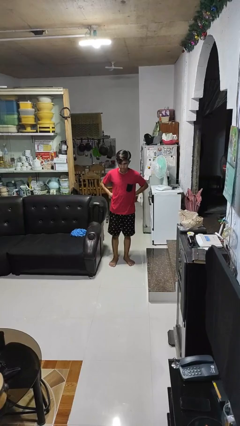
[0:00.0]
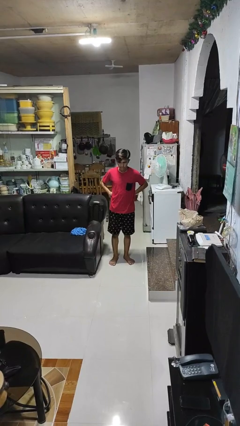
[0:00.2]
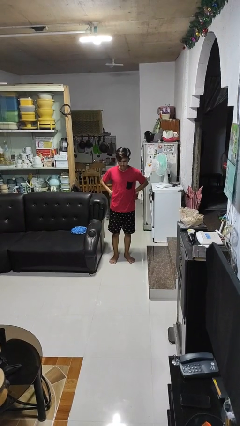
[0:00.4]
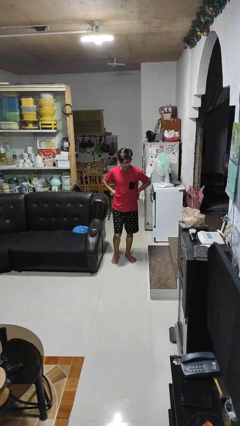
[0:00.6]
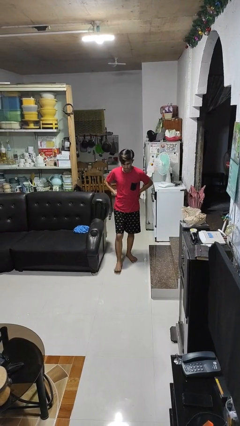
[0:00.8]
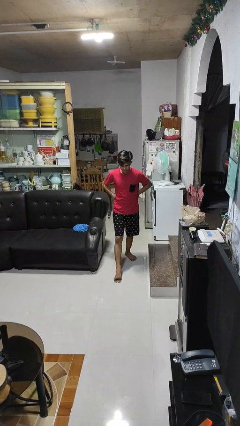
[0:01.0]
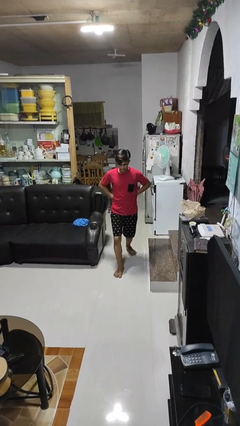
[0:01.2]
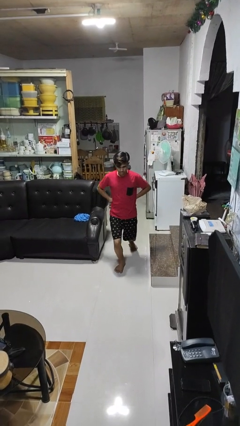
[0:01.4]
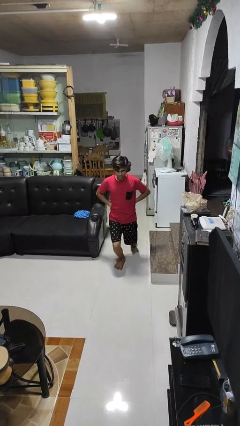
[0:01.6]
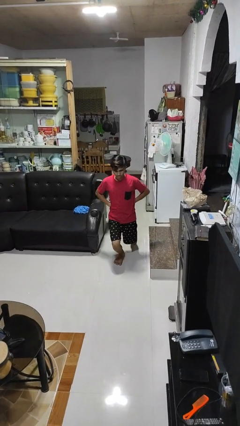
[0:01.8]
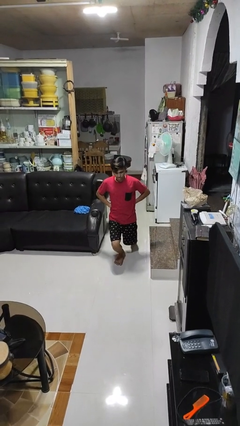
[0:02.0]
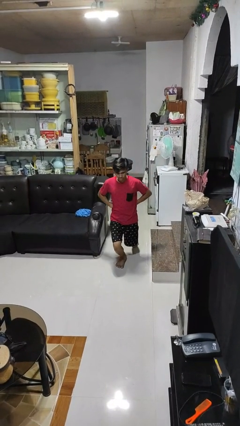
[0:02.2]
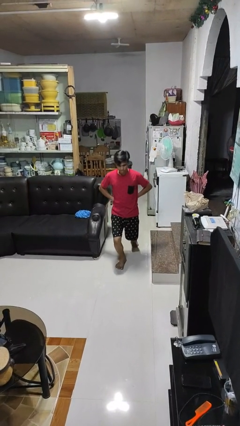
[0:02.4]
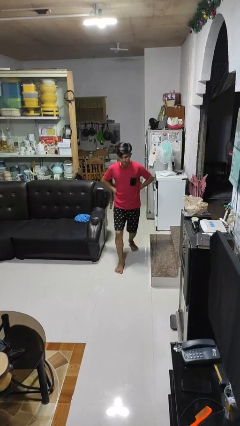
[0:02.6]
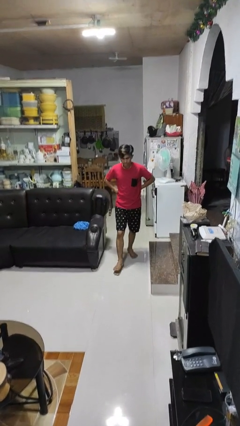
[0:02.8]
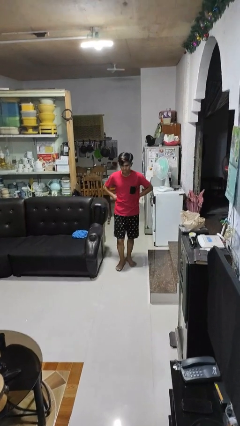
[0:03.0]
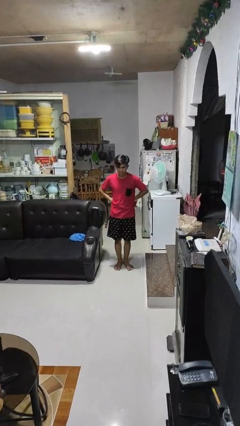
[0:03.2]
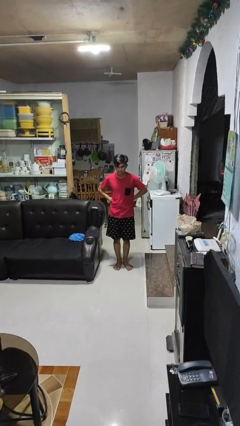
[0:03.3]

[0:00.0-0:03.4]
person exercises with lunges

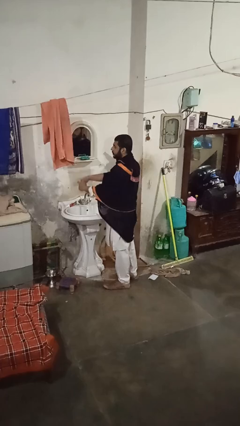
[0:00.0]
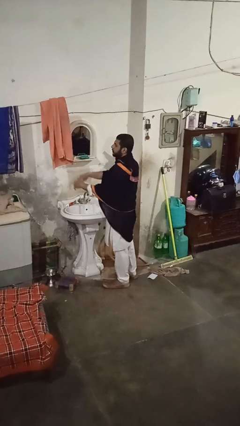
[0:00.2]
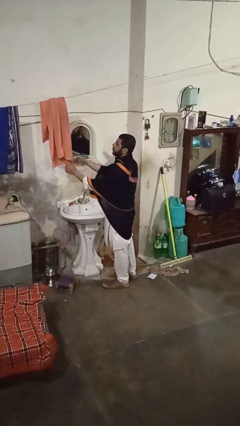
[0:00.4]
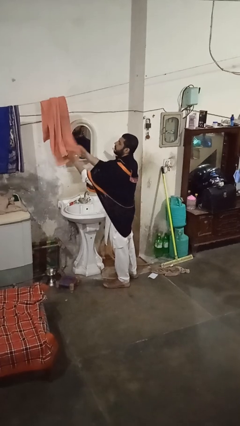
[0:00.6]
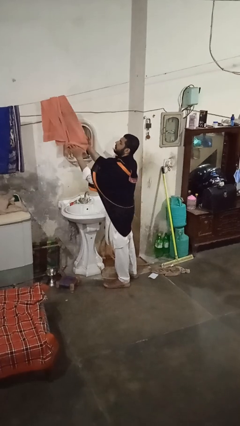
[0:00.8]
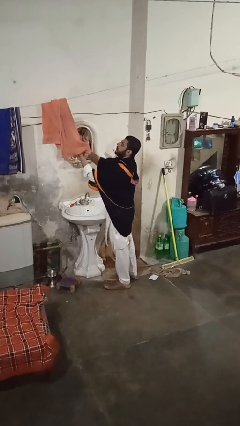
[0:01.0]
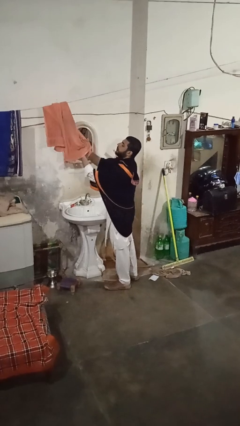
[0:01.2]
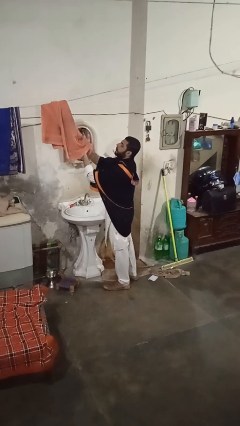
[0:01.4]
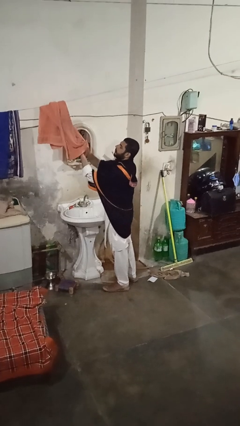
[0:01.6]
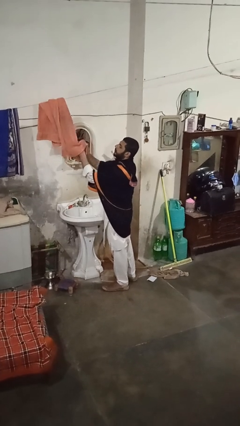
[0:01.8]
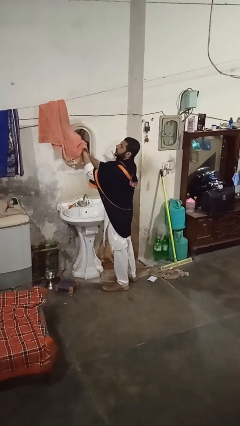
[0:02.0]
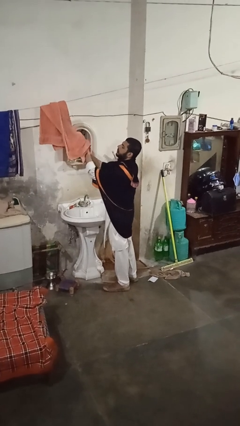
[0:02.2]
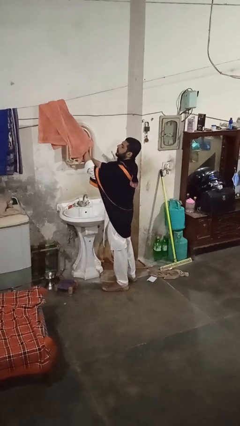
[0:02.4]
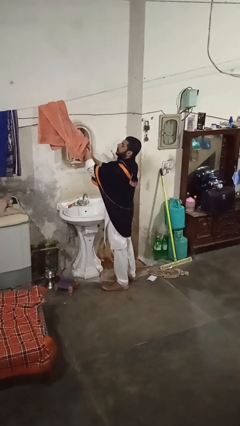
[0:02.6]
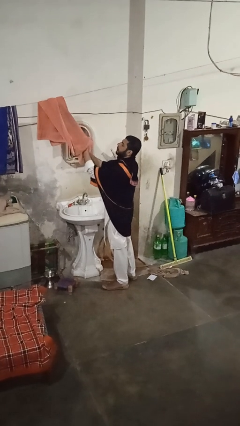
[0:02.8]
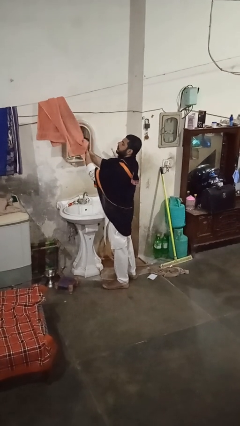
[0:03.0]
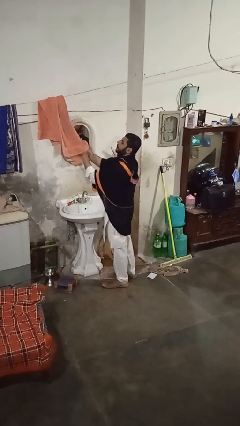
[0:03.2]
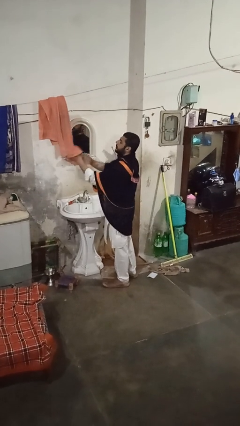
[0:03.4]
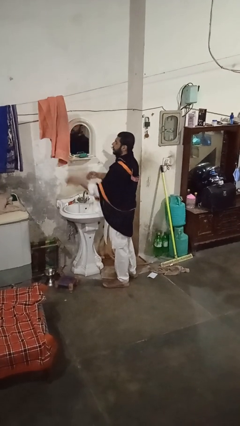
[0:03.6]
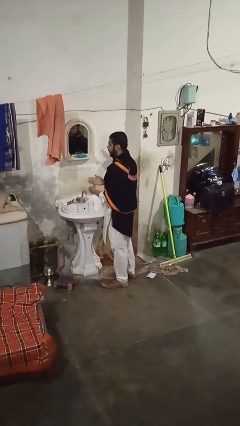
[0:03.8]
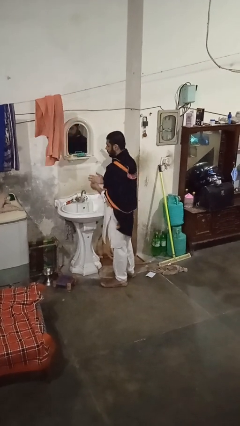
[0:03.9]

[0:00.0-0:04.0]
person dries hands with towel

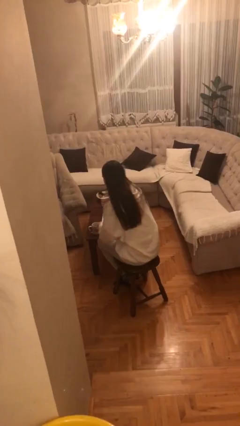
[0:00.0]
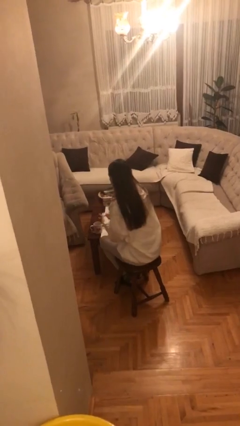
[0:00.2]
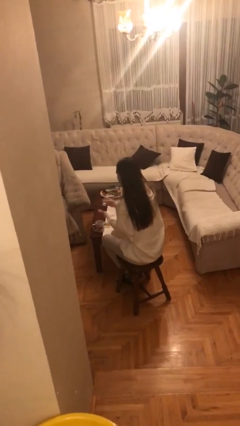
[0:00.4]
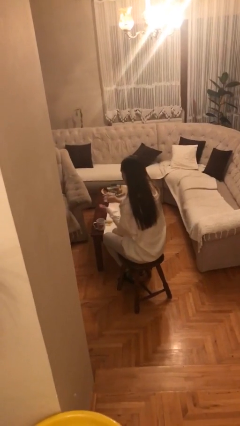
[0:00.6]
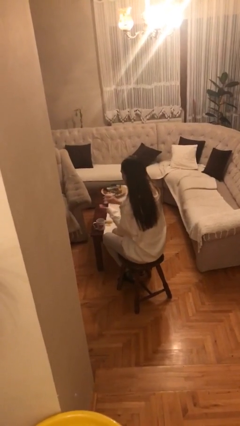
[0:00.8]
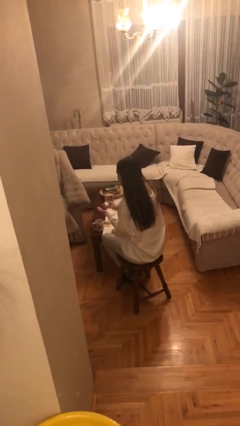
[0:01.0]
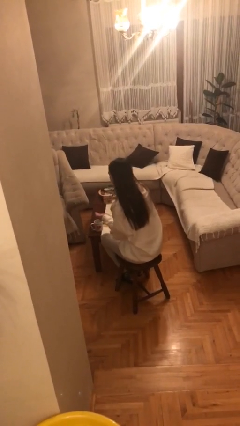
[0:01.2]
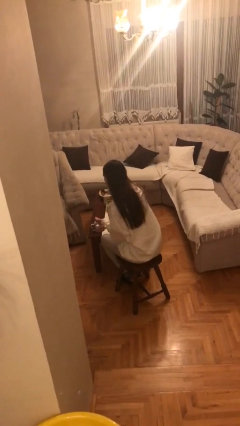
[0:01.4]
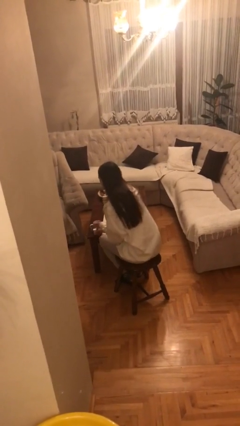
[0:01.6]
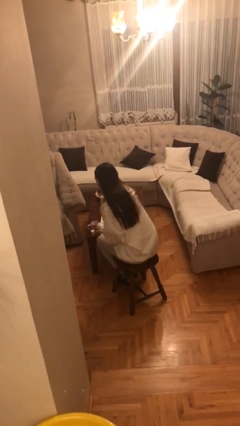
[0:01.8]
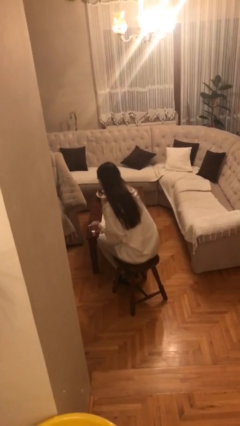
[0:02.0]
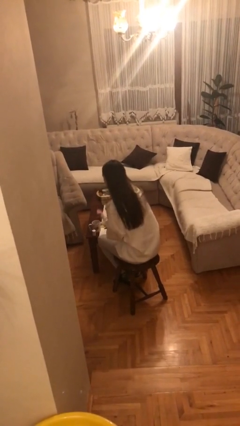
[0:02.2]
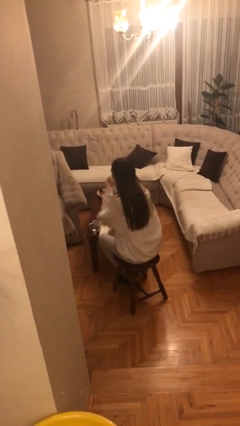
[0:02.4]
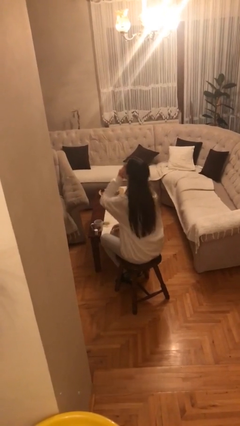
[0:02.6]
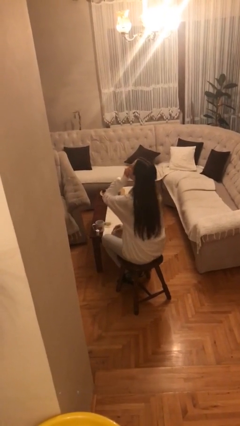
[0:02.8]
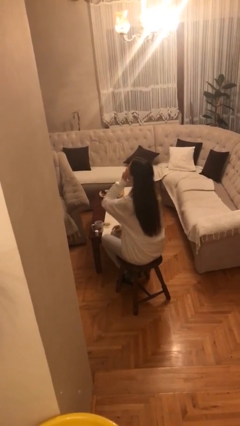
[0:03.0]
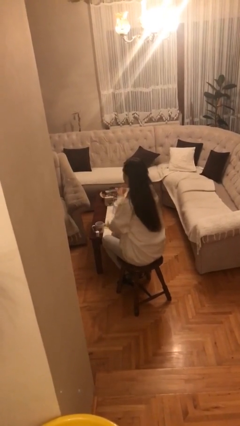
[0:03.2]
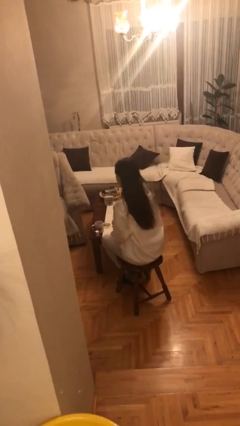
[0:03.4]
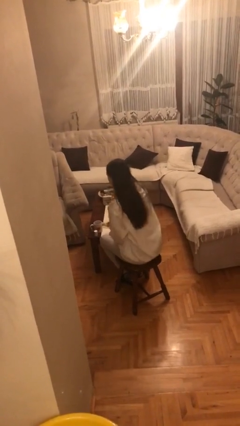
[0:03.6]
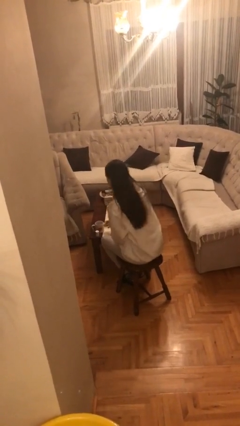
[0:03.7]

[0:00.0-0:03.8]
person takes medicine pills

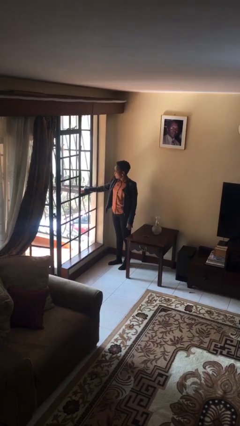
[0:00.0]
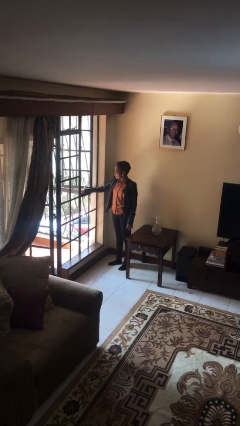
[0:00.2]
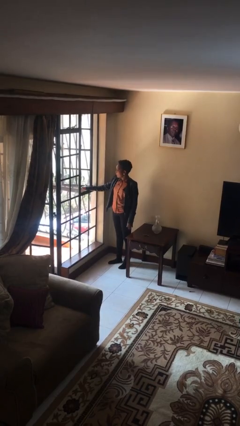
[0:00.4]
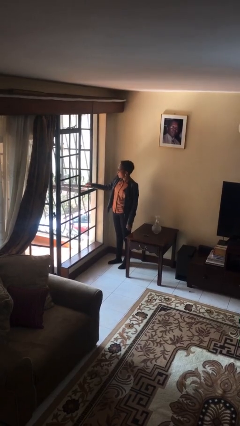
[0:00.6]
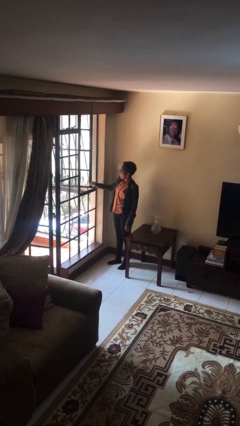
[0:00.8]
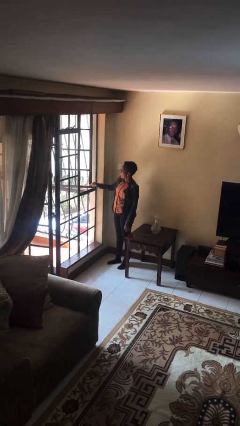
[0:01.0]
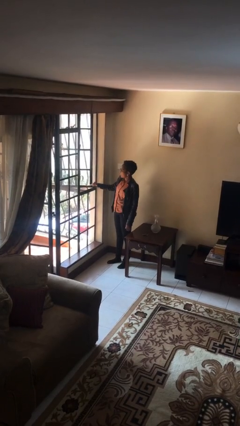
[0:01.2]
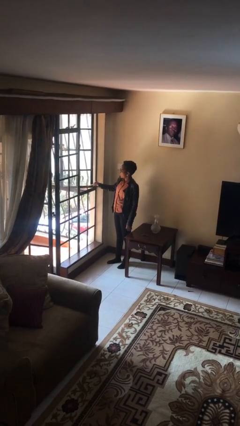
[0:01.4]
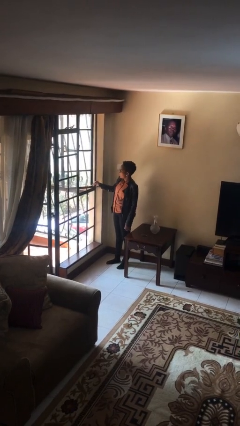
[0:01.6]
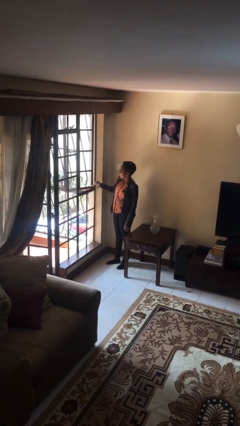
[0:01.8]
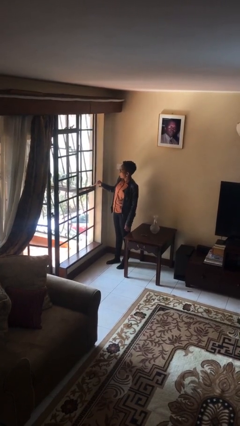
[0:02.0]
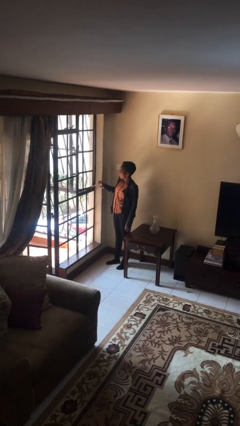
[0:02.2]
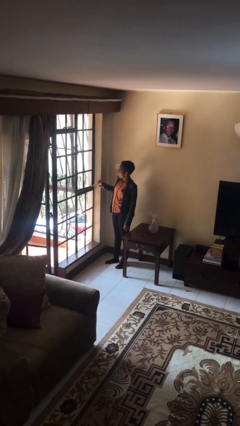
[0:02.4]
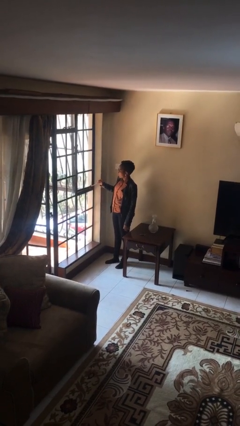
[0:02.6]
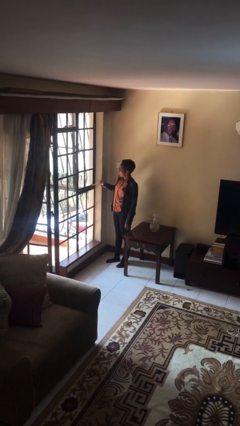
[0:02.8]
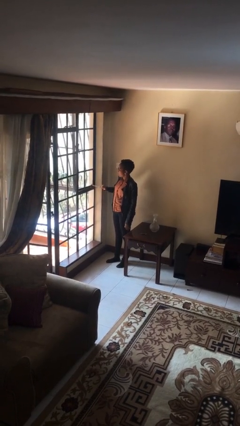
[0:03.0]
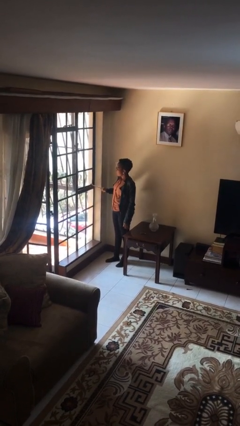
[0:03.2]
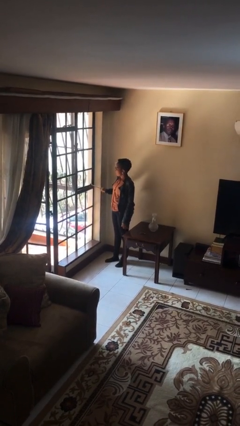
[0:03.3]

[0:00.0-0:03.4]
person closes home window

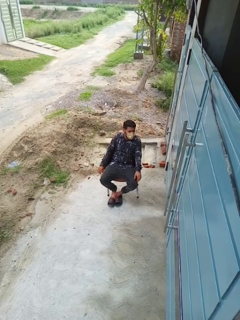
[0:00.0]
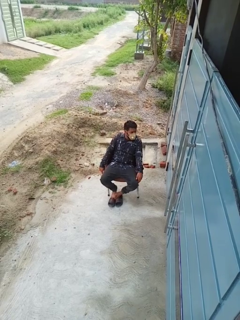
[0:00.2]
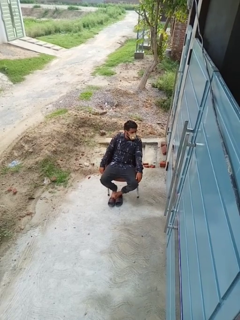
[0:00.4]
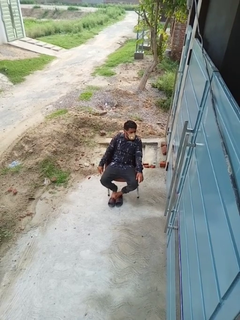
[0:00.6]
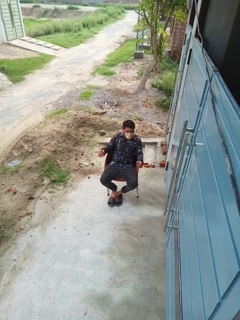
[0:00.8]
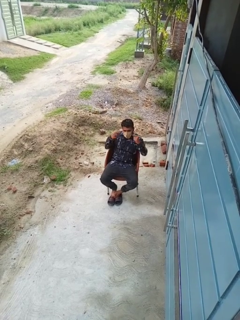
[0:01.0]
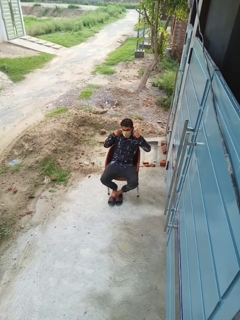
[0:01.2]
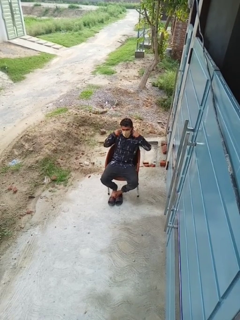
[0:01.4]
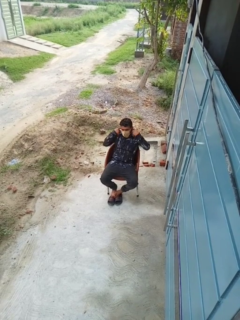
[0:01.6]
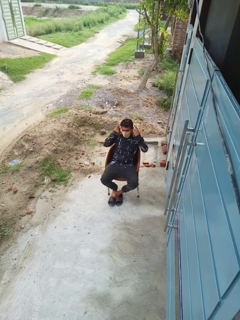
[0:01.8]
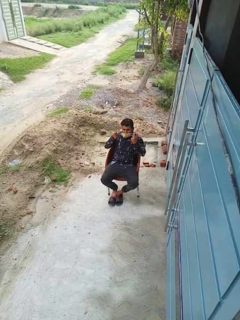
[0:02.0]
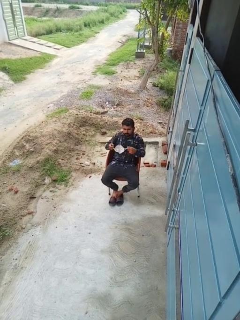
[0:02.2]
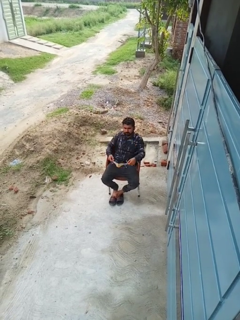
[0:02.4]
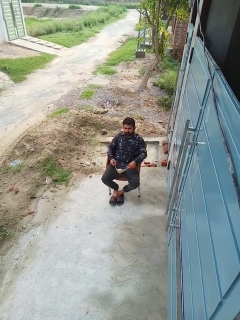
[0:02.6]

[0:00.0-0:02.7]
person takes off facemask

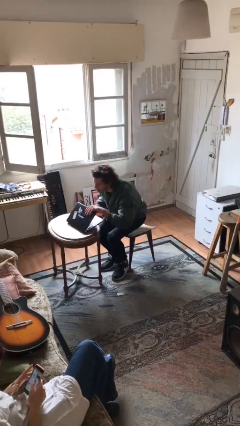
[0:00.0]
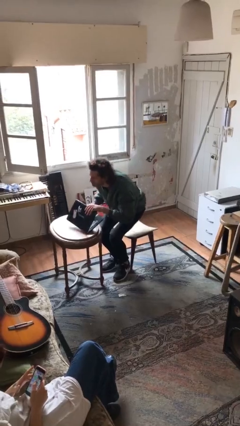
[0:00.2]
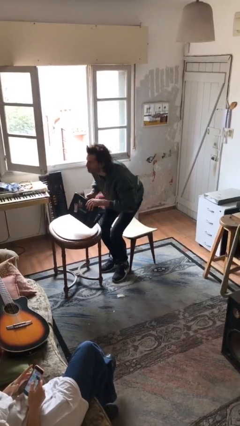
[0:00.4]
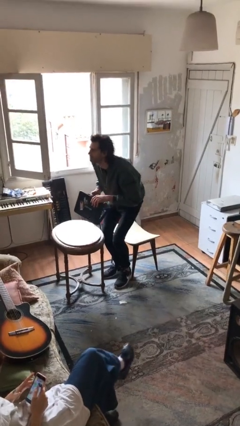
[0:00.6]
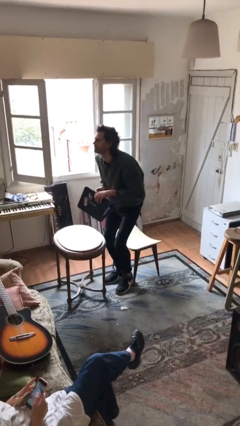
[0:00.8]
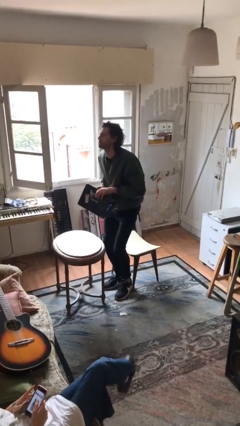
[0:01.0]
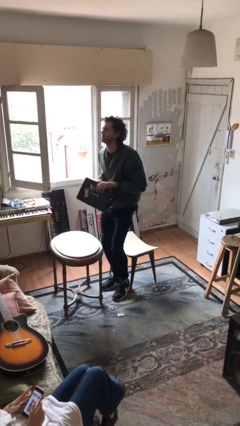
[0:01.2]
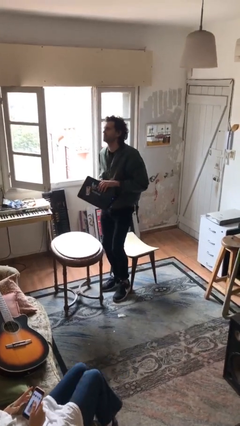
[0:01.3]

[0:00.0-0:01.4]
person stands up
